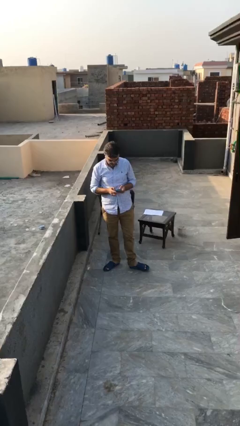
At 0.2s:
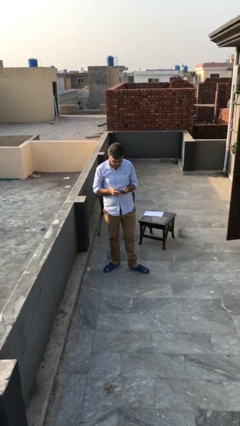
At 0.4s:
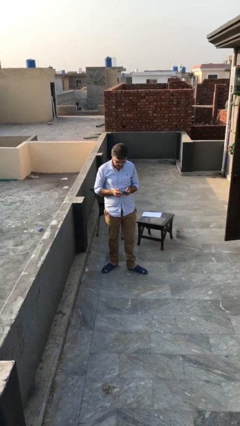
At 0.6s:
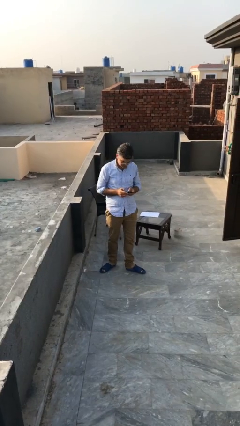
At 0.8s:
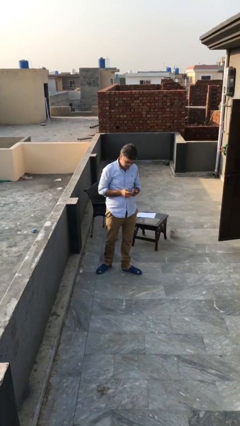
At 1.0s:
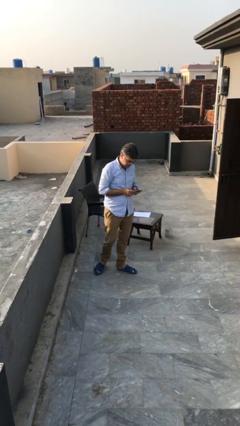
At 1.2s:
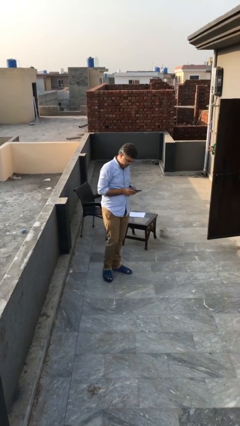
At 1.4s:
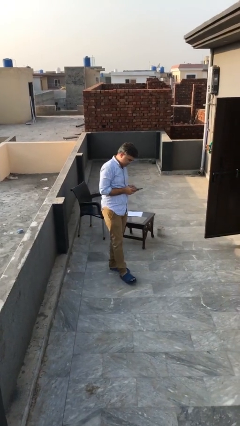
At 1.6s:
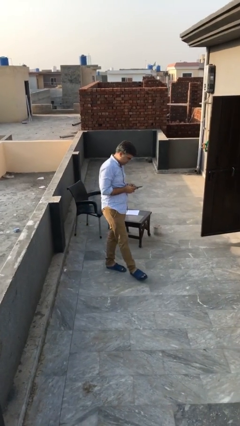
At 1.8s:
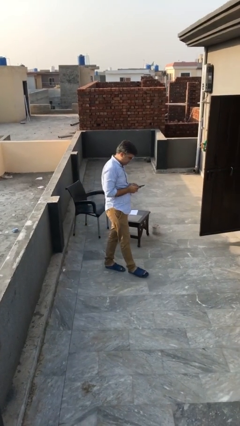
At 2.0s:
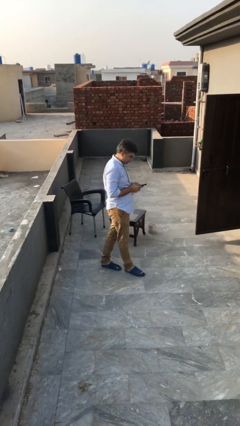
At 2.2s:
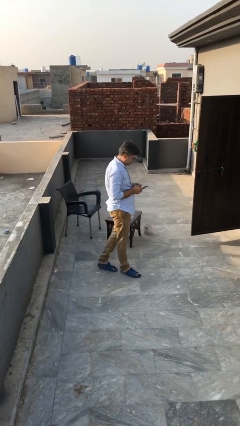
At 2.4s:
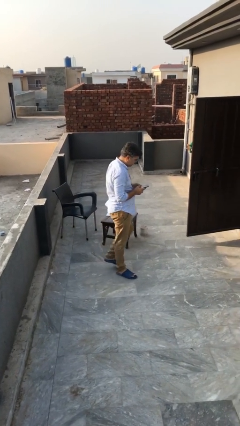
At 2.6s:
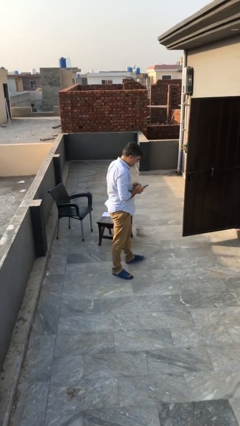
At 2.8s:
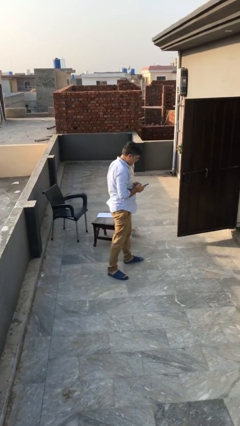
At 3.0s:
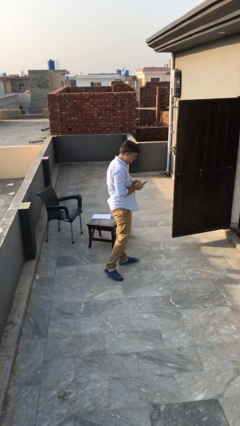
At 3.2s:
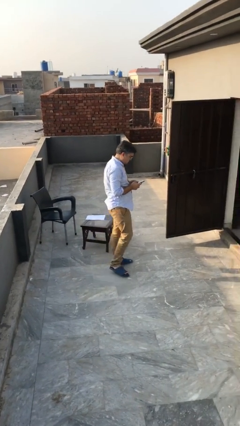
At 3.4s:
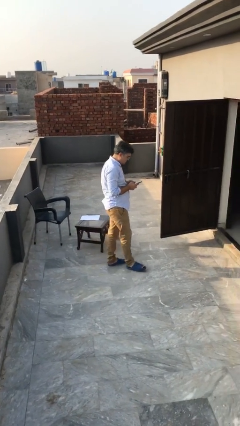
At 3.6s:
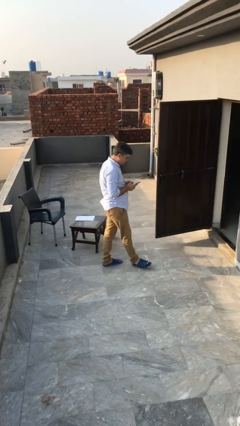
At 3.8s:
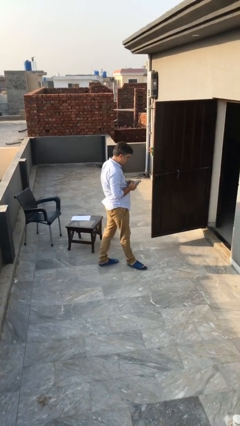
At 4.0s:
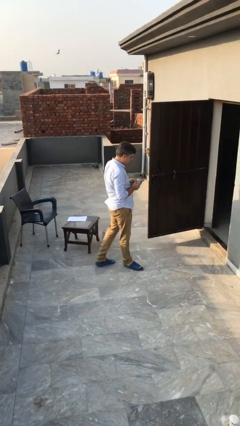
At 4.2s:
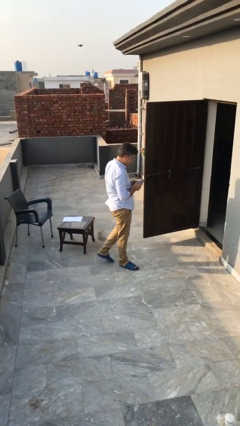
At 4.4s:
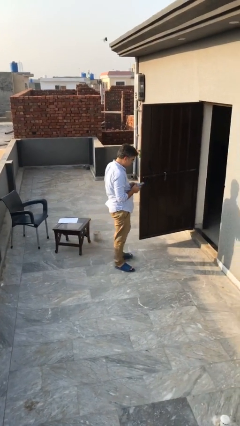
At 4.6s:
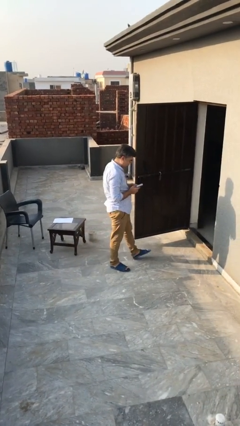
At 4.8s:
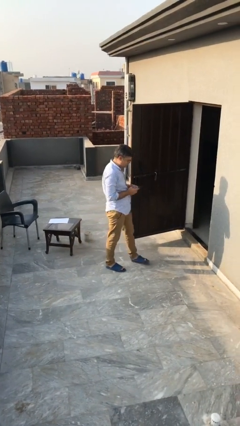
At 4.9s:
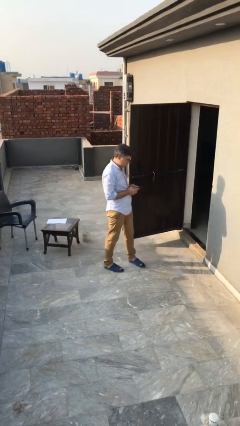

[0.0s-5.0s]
person texts on phone

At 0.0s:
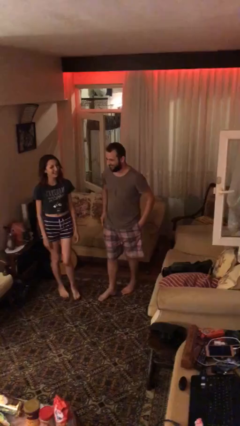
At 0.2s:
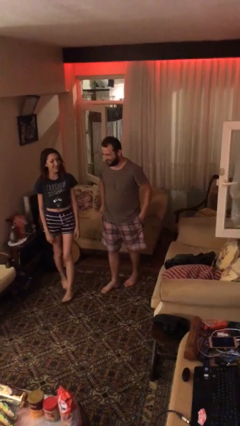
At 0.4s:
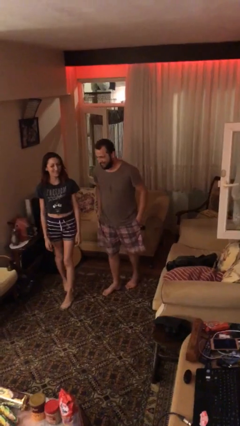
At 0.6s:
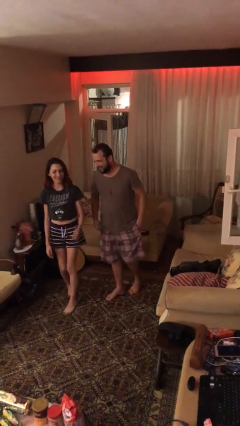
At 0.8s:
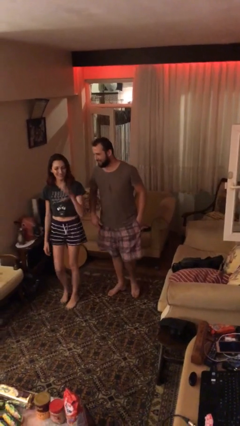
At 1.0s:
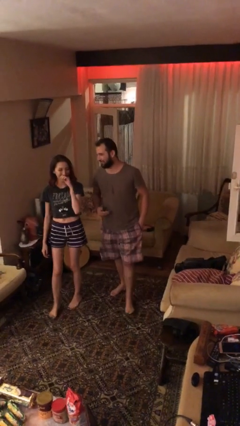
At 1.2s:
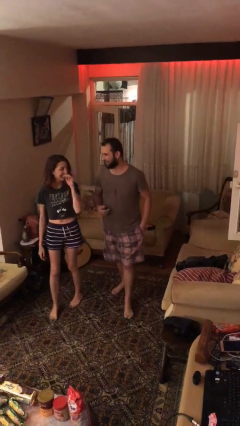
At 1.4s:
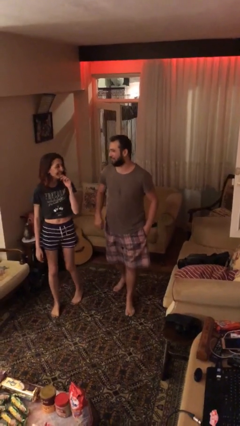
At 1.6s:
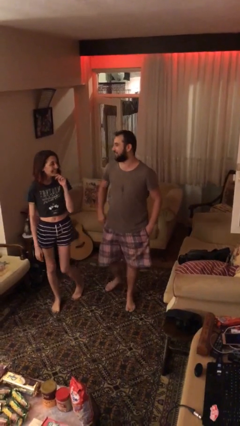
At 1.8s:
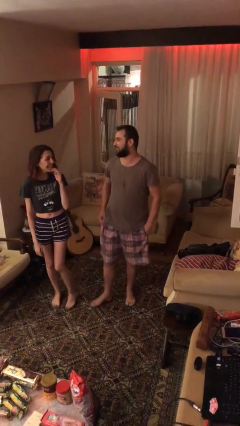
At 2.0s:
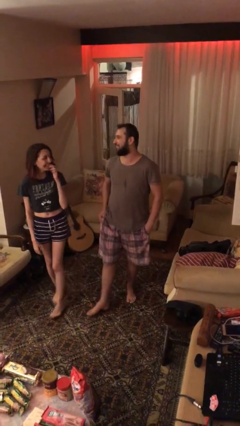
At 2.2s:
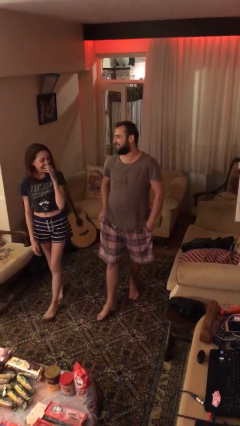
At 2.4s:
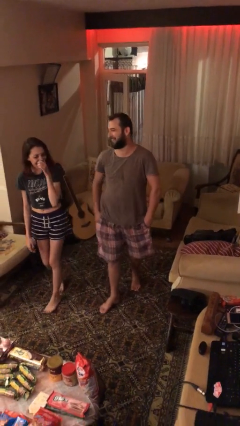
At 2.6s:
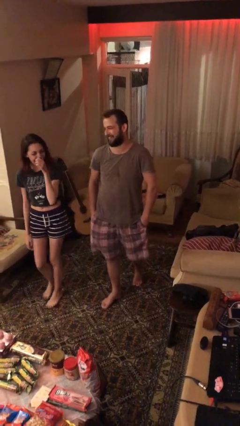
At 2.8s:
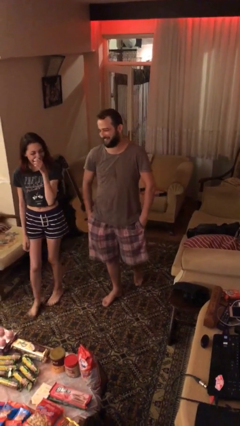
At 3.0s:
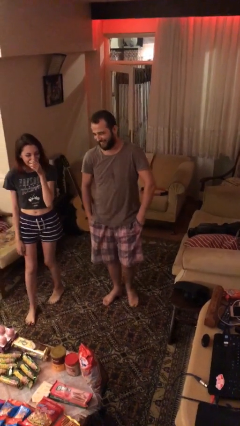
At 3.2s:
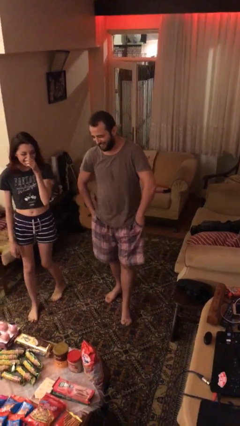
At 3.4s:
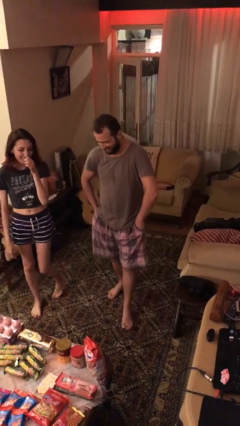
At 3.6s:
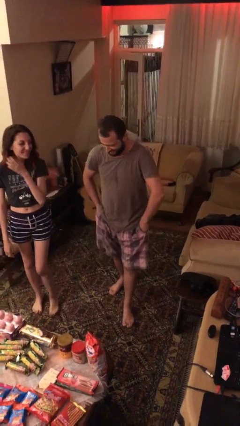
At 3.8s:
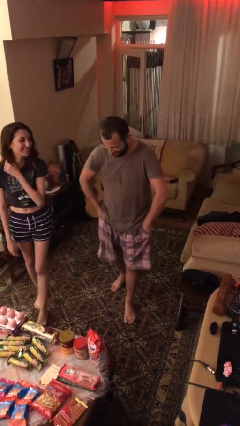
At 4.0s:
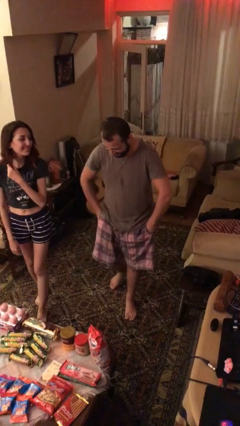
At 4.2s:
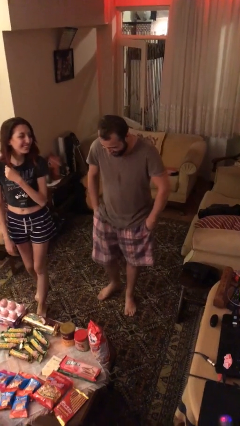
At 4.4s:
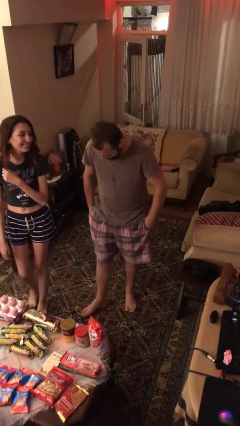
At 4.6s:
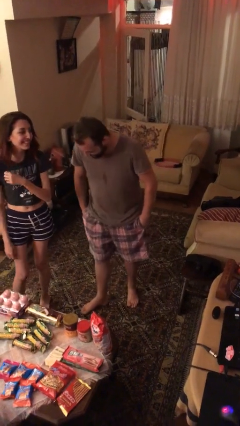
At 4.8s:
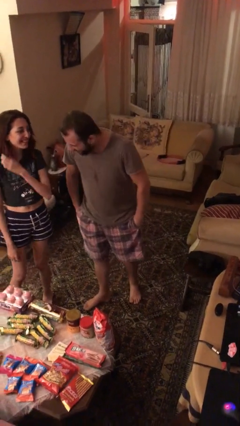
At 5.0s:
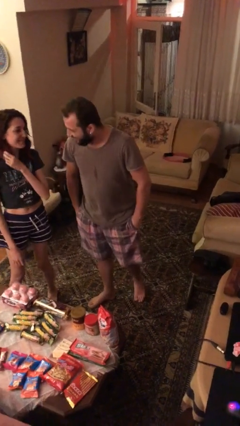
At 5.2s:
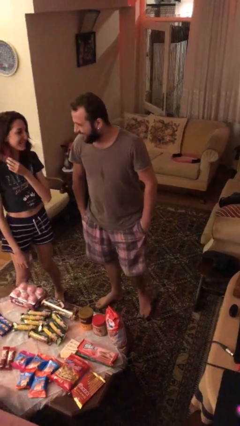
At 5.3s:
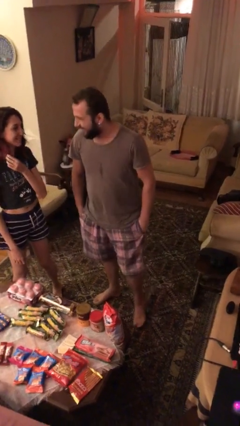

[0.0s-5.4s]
person talks to person

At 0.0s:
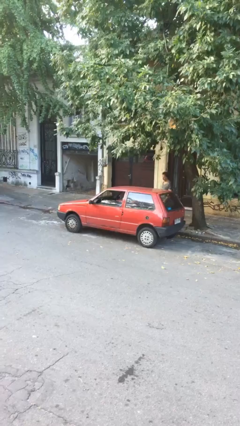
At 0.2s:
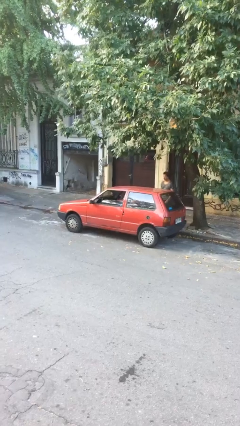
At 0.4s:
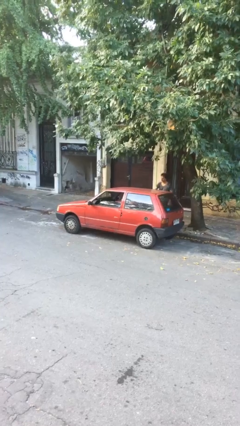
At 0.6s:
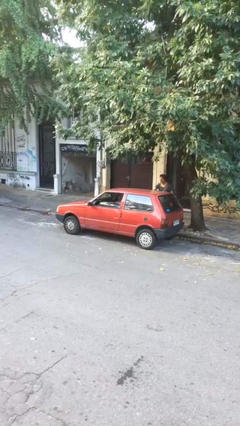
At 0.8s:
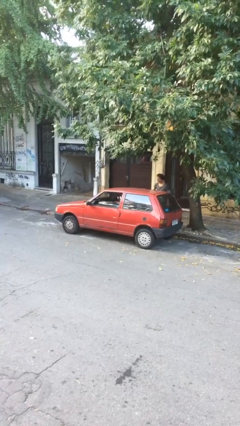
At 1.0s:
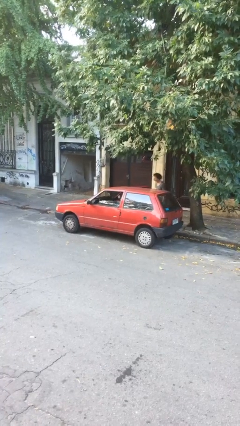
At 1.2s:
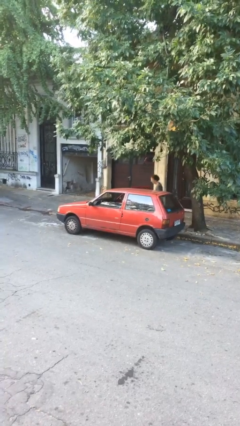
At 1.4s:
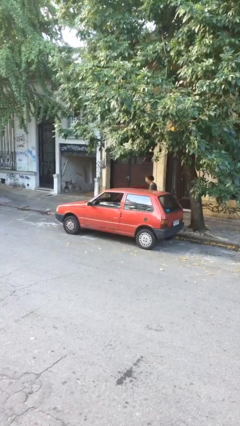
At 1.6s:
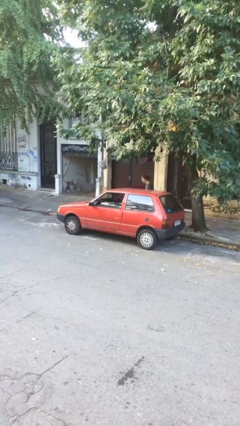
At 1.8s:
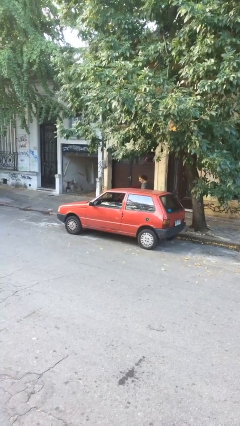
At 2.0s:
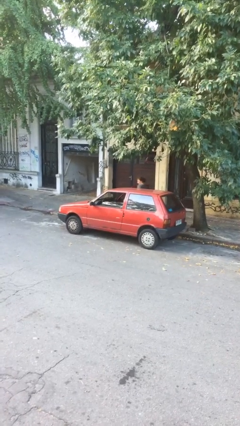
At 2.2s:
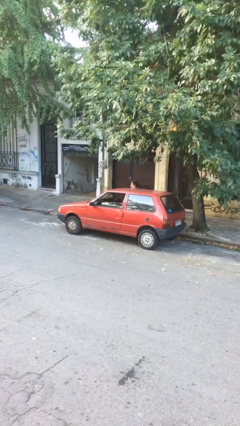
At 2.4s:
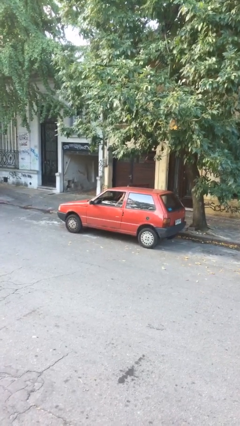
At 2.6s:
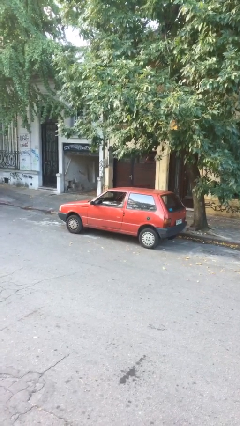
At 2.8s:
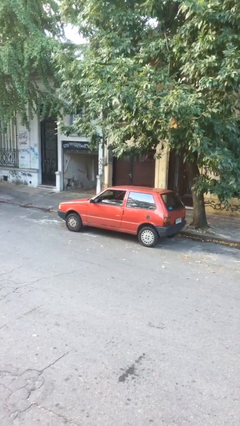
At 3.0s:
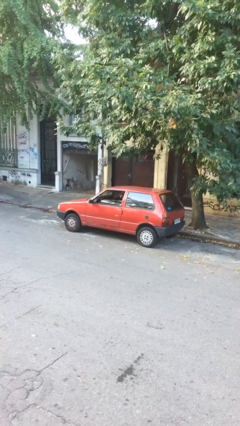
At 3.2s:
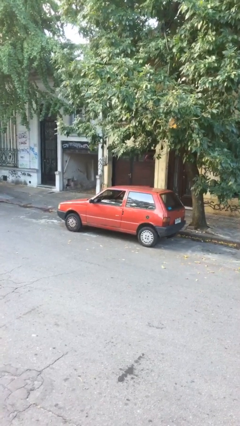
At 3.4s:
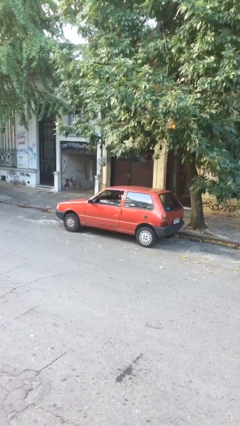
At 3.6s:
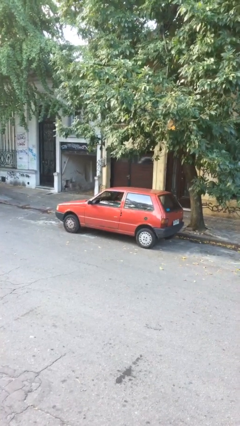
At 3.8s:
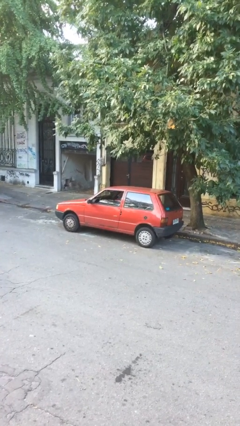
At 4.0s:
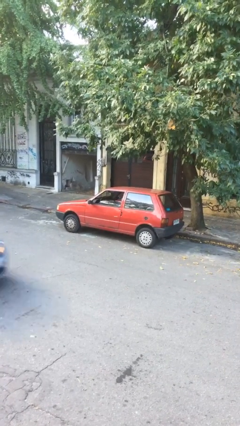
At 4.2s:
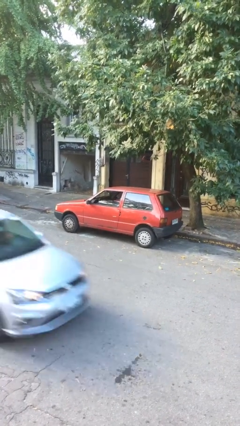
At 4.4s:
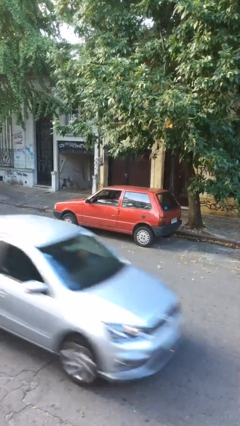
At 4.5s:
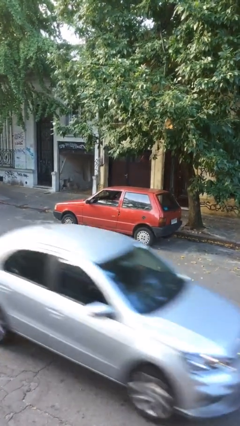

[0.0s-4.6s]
car picks up person

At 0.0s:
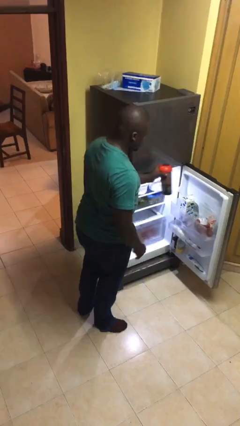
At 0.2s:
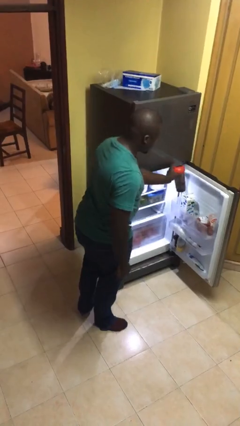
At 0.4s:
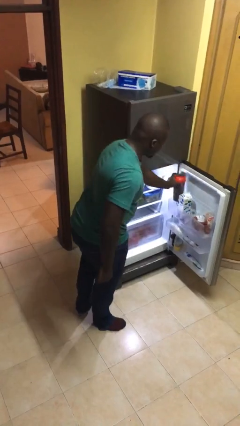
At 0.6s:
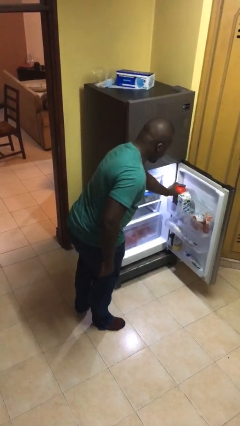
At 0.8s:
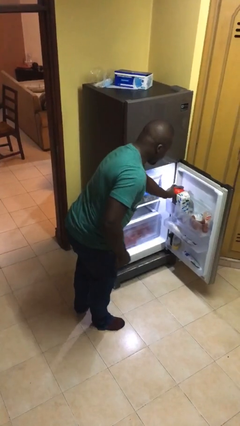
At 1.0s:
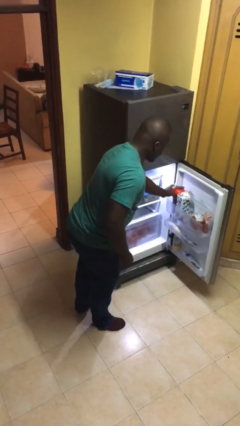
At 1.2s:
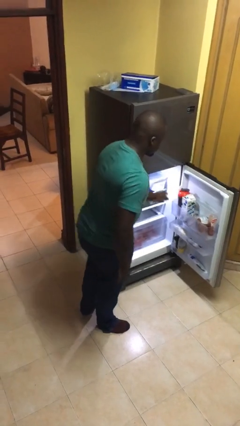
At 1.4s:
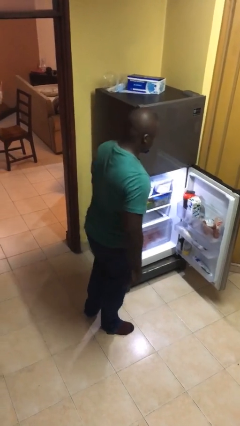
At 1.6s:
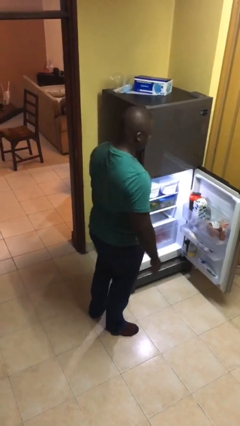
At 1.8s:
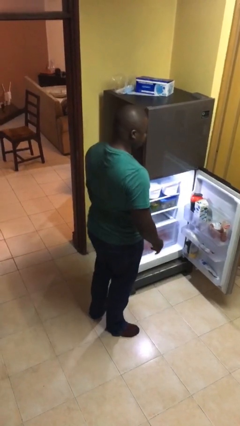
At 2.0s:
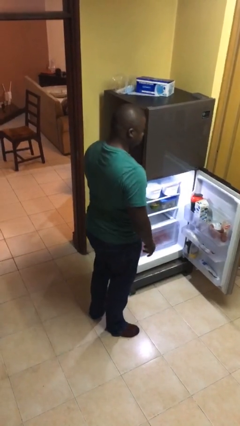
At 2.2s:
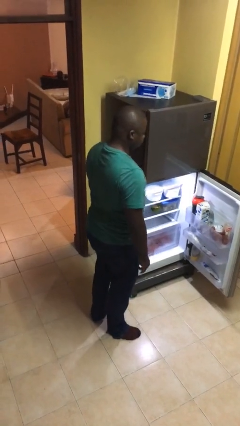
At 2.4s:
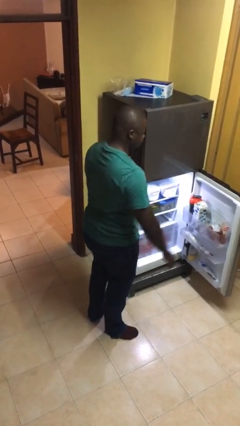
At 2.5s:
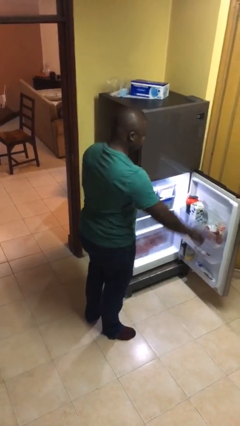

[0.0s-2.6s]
person puts object into refrigerator

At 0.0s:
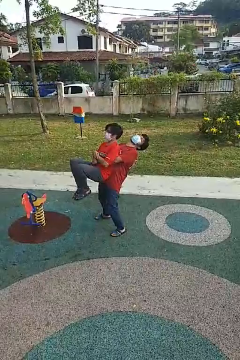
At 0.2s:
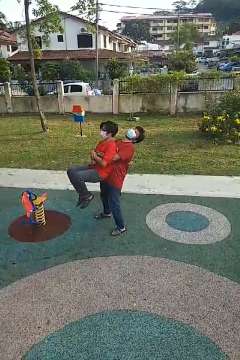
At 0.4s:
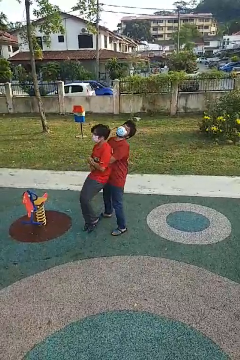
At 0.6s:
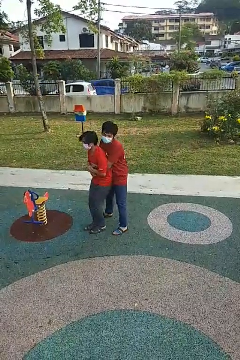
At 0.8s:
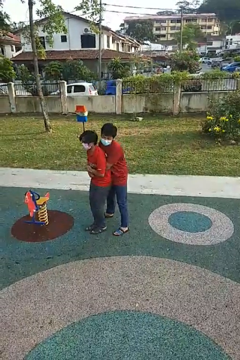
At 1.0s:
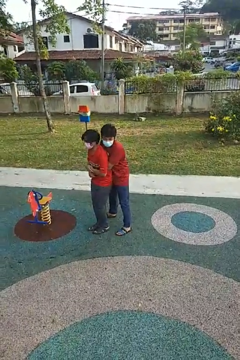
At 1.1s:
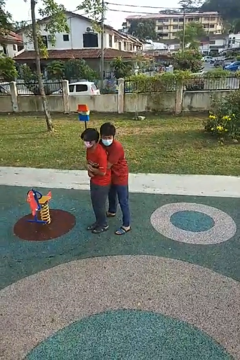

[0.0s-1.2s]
person puts down person
